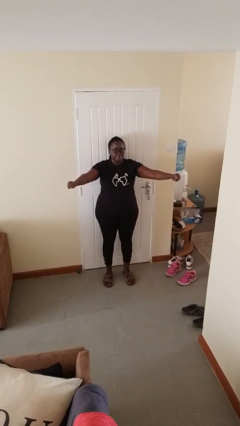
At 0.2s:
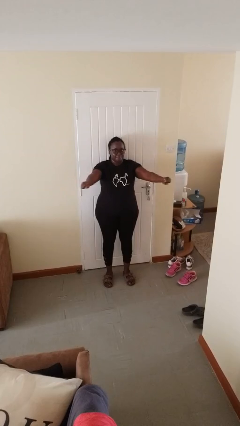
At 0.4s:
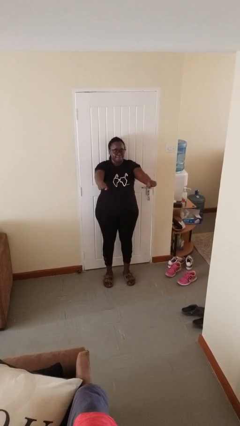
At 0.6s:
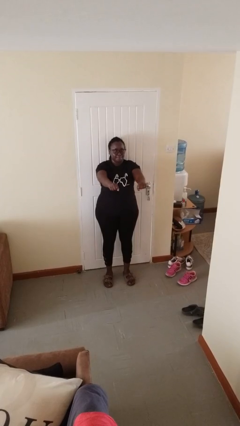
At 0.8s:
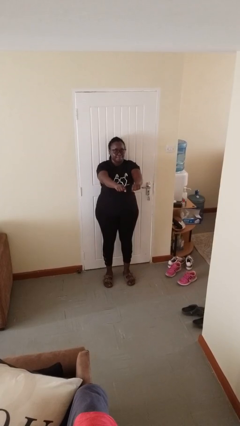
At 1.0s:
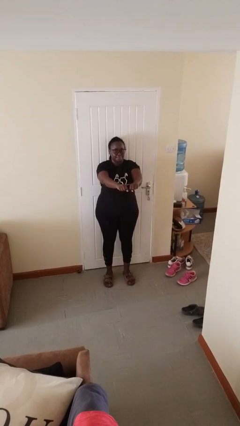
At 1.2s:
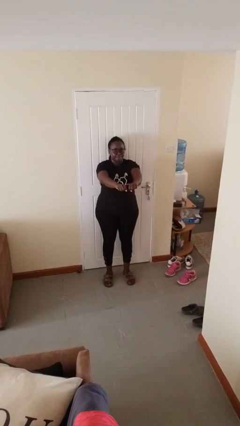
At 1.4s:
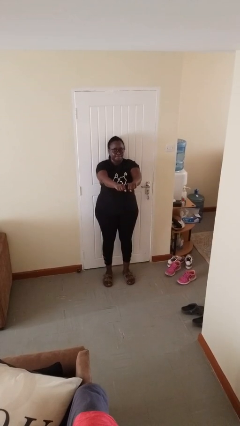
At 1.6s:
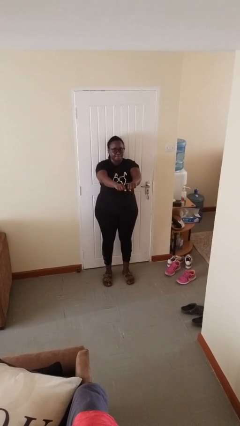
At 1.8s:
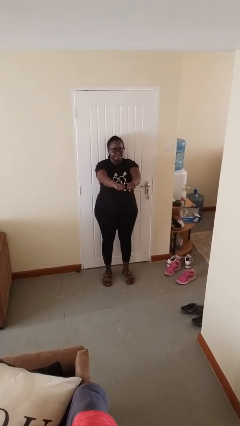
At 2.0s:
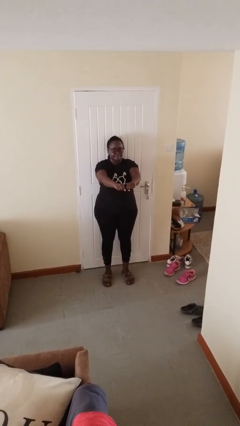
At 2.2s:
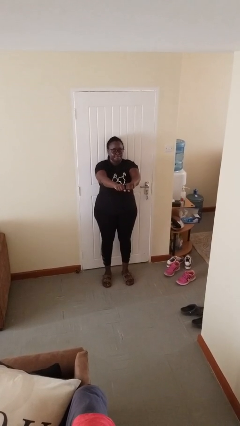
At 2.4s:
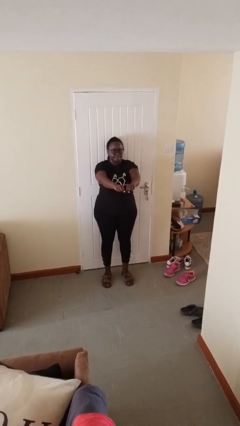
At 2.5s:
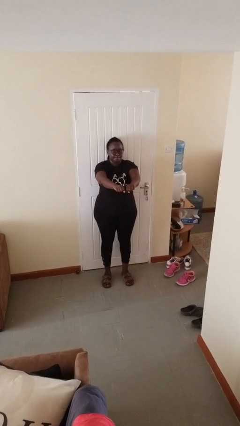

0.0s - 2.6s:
person gestures zoom out

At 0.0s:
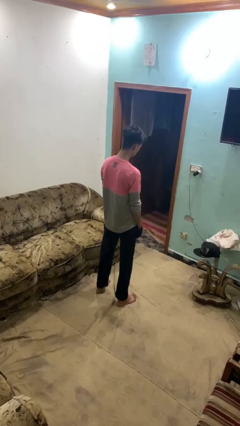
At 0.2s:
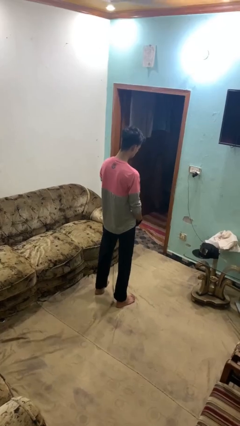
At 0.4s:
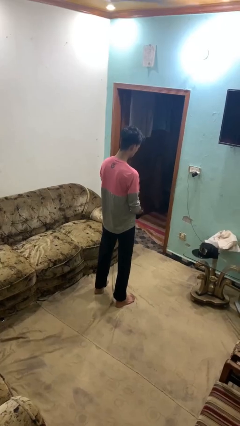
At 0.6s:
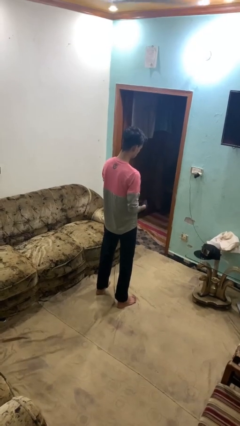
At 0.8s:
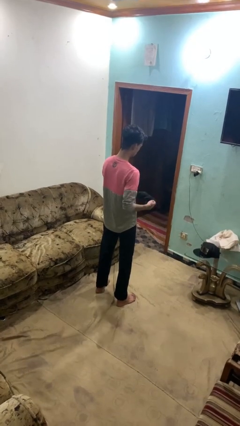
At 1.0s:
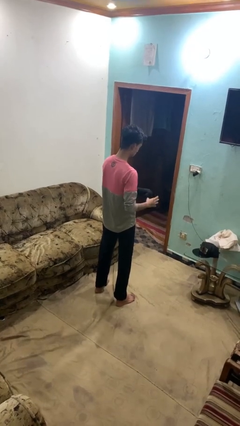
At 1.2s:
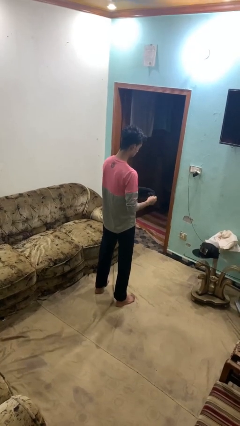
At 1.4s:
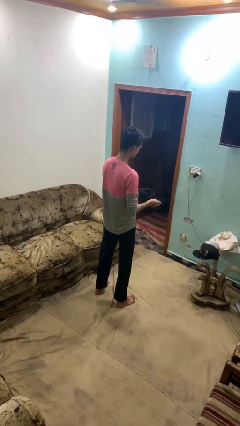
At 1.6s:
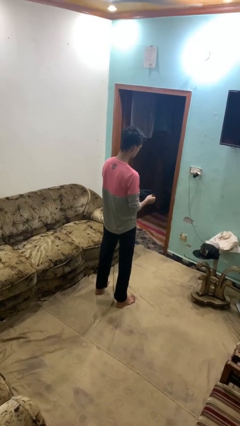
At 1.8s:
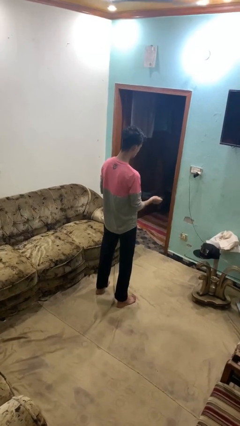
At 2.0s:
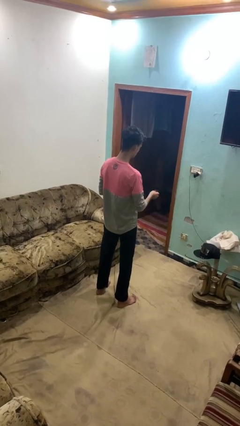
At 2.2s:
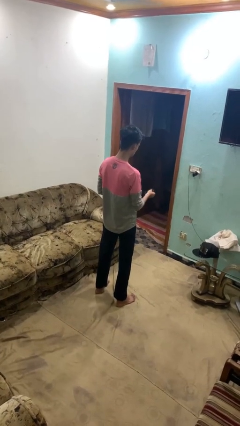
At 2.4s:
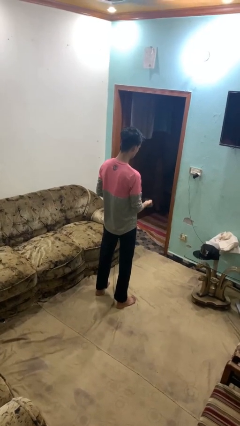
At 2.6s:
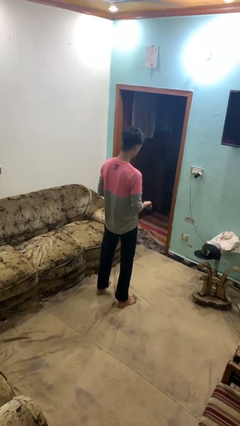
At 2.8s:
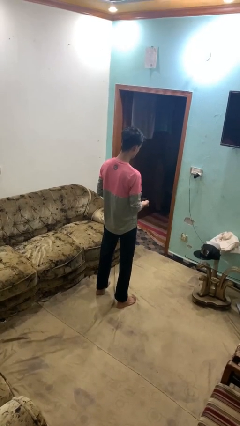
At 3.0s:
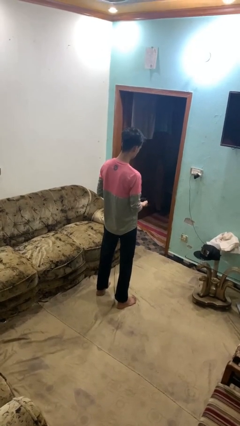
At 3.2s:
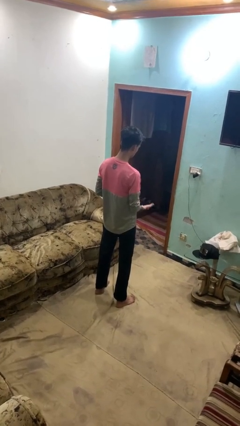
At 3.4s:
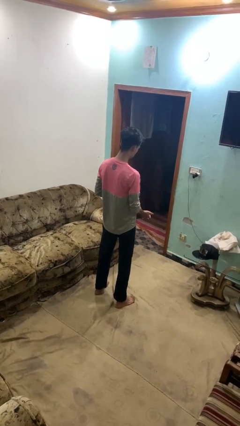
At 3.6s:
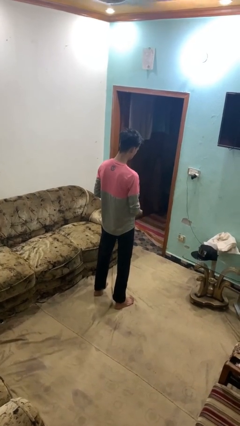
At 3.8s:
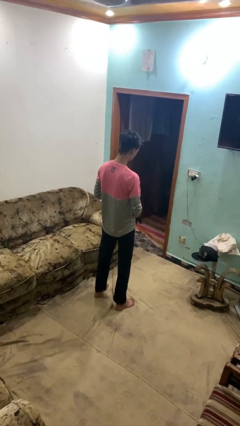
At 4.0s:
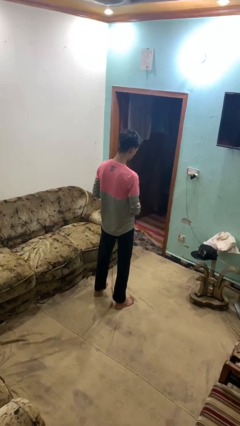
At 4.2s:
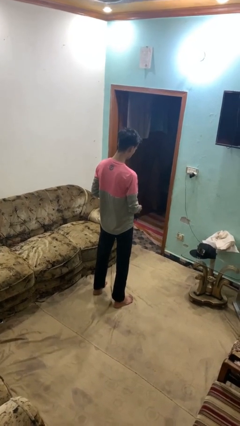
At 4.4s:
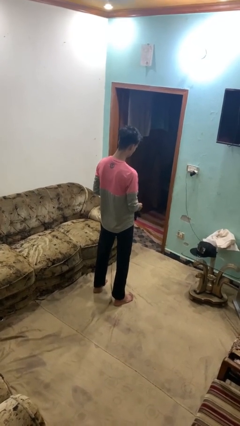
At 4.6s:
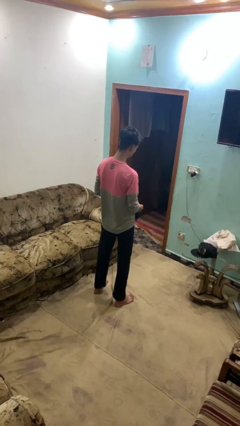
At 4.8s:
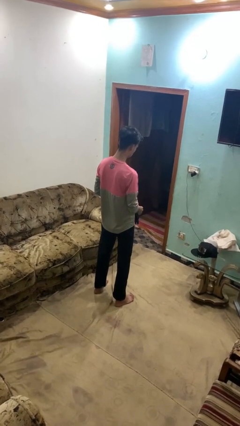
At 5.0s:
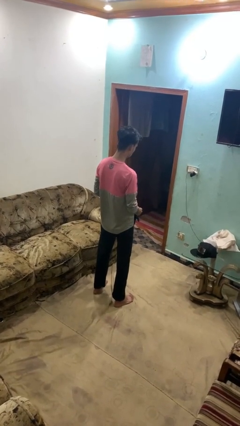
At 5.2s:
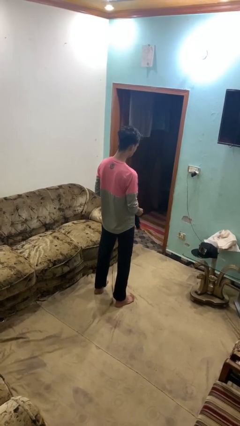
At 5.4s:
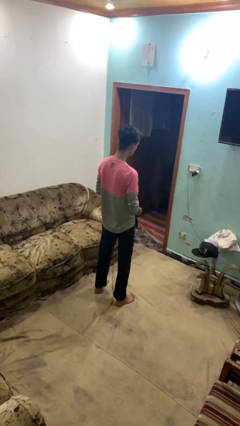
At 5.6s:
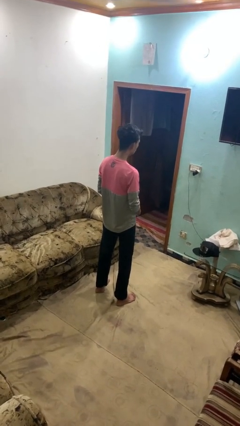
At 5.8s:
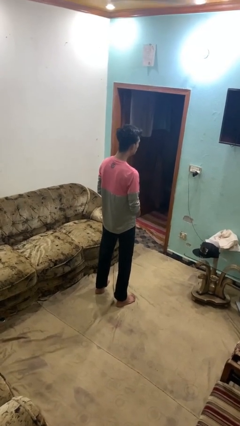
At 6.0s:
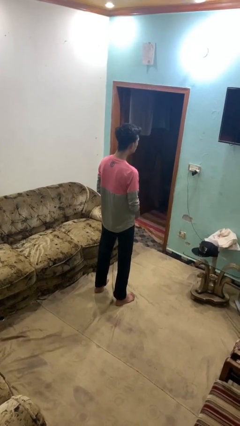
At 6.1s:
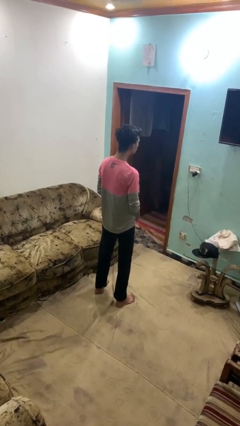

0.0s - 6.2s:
person takes off gloves

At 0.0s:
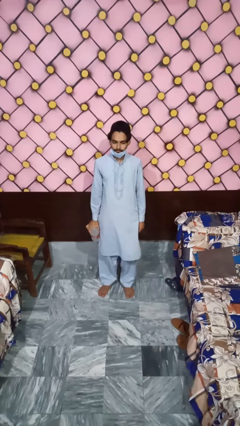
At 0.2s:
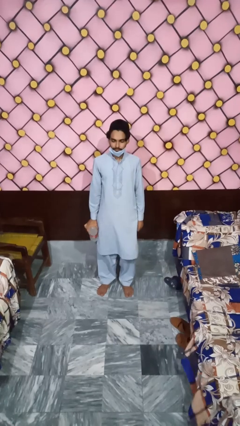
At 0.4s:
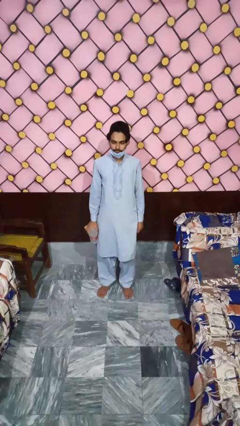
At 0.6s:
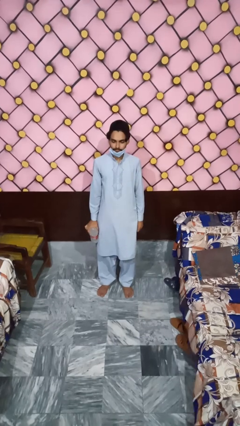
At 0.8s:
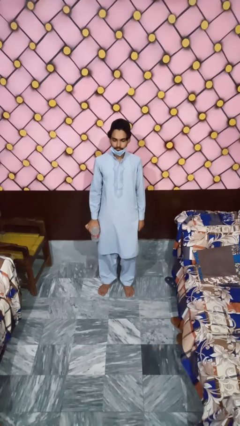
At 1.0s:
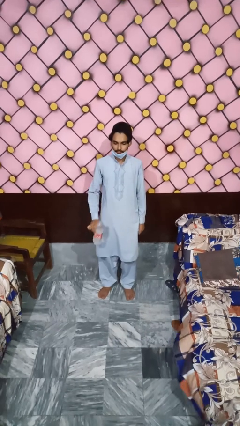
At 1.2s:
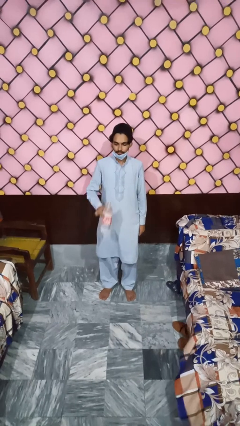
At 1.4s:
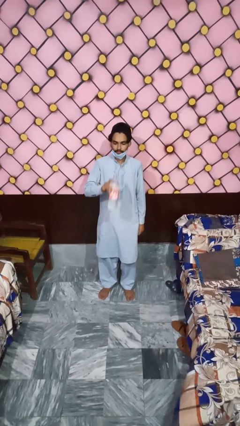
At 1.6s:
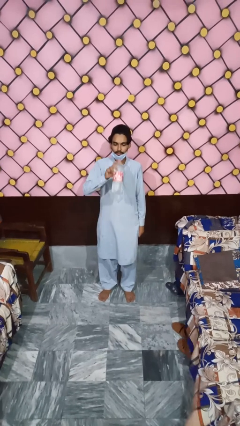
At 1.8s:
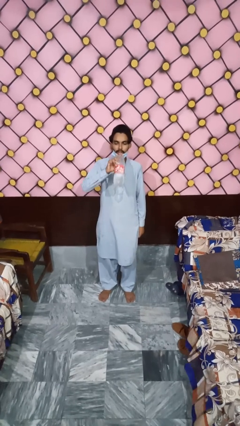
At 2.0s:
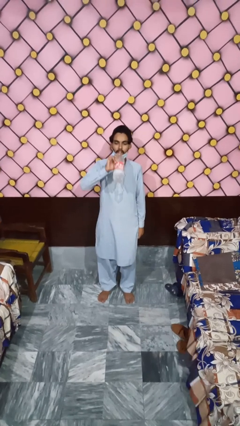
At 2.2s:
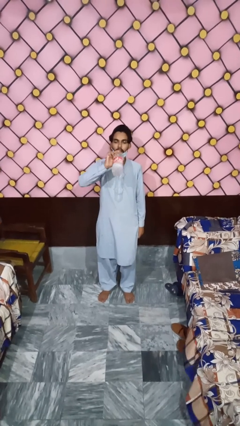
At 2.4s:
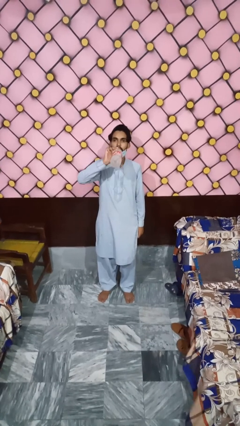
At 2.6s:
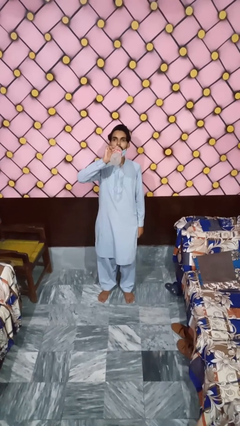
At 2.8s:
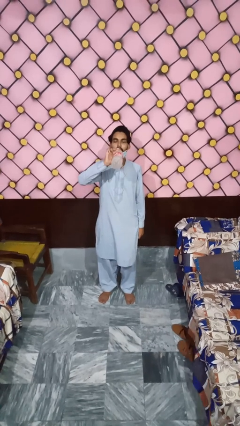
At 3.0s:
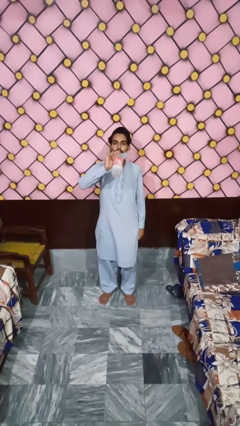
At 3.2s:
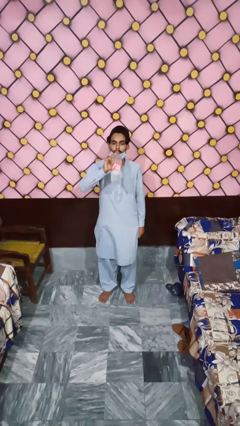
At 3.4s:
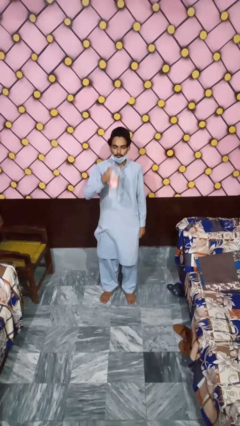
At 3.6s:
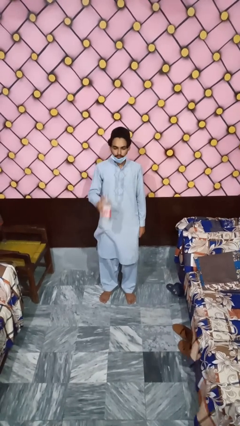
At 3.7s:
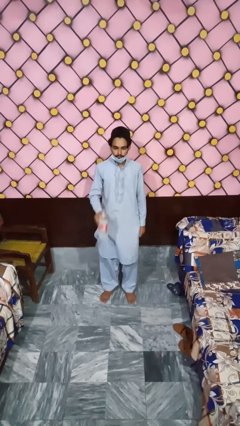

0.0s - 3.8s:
person drinks from bottle

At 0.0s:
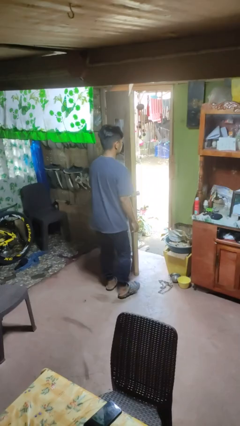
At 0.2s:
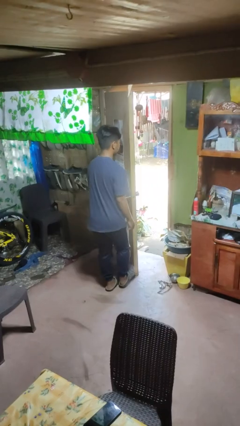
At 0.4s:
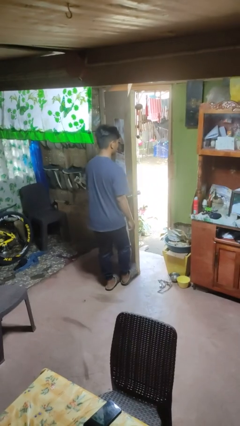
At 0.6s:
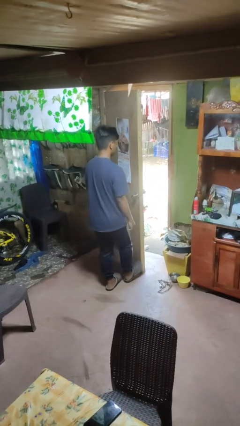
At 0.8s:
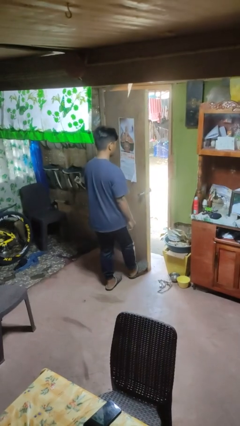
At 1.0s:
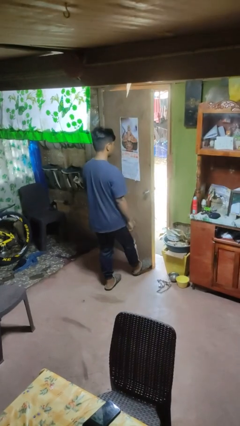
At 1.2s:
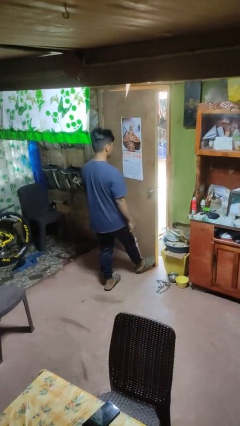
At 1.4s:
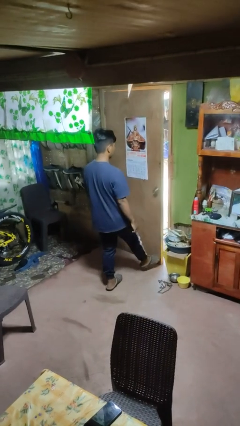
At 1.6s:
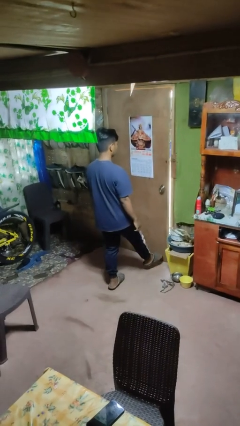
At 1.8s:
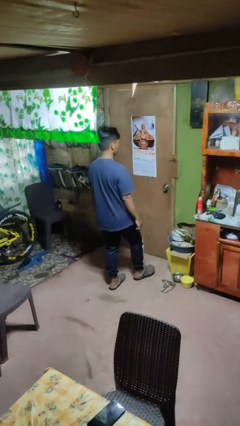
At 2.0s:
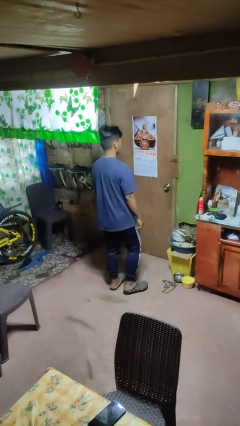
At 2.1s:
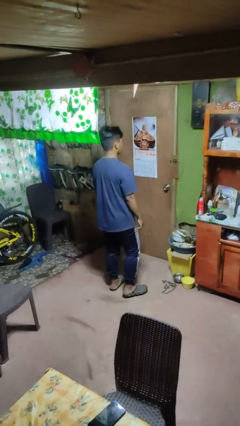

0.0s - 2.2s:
person closes door with foot

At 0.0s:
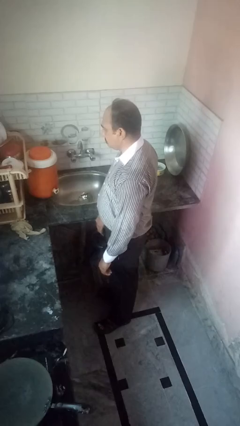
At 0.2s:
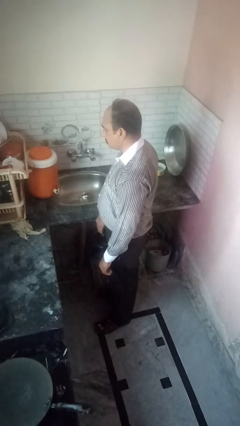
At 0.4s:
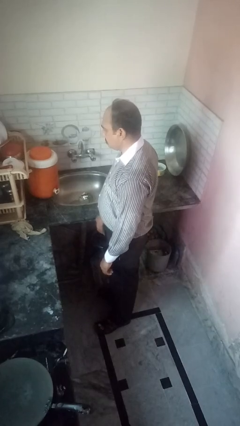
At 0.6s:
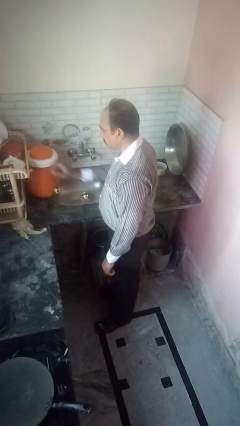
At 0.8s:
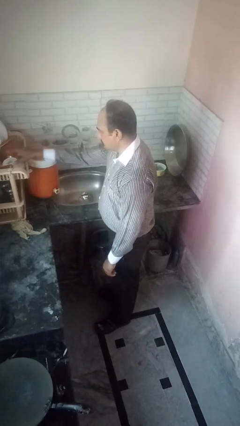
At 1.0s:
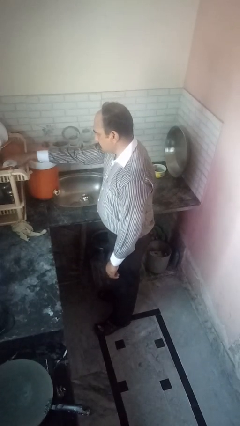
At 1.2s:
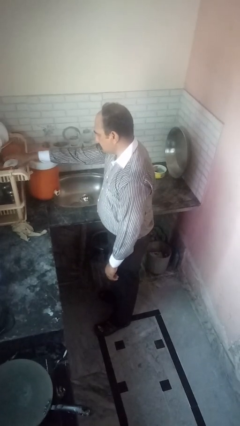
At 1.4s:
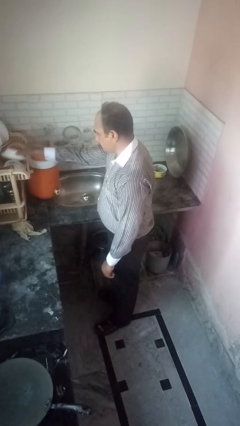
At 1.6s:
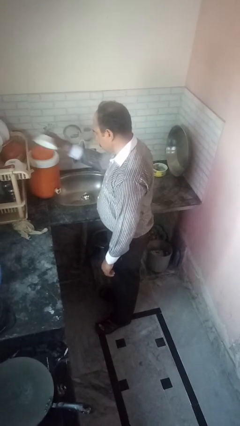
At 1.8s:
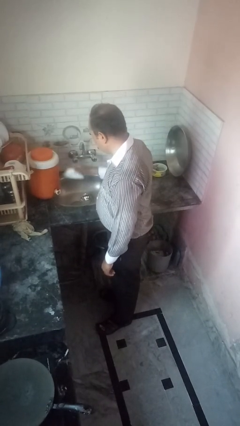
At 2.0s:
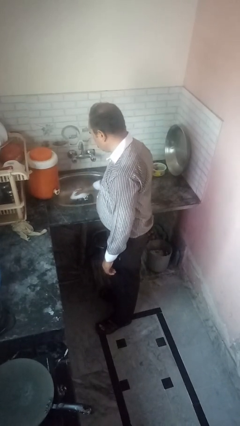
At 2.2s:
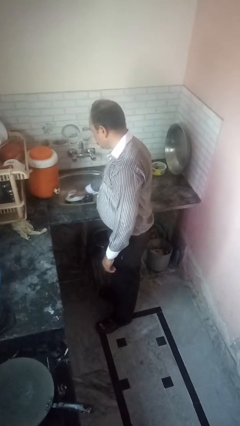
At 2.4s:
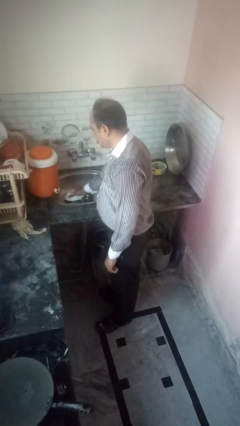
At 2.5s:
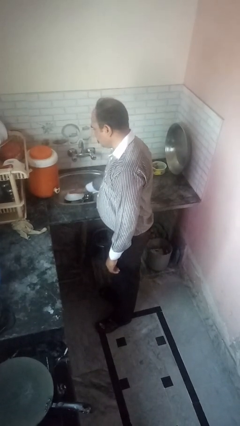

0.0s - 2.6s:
person loads dishwasher
